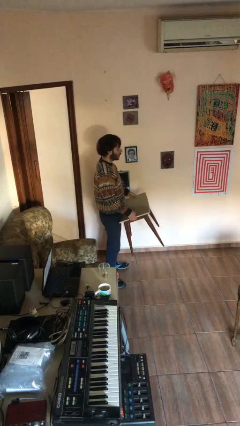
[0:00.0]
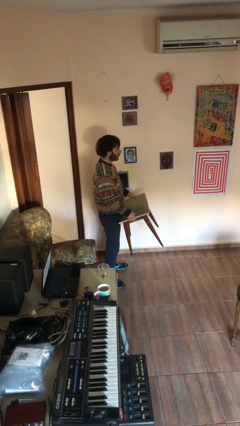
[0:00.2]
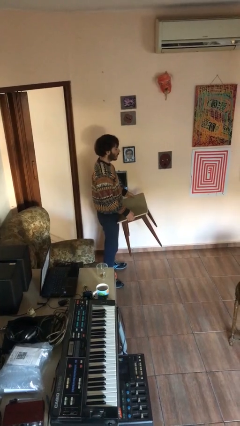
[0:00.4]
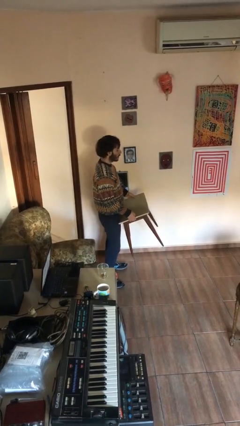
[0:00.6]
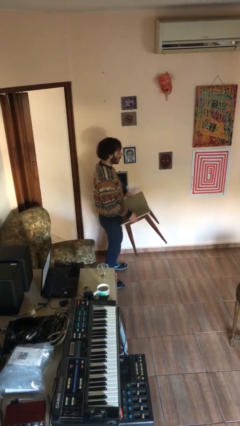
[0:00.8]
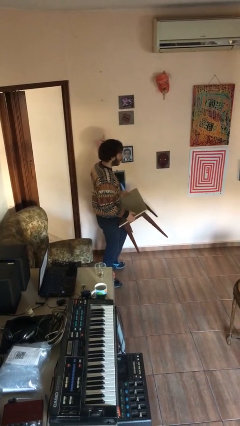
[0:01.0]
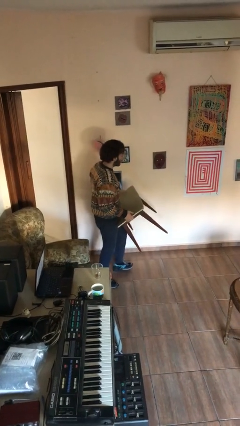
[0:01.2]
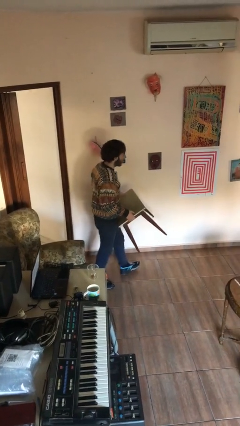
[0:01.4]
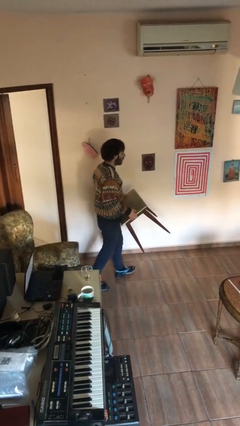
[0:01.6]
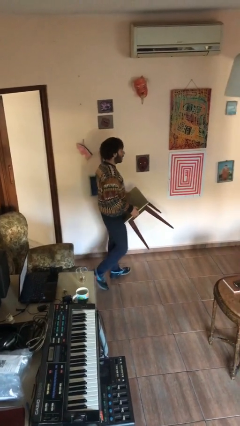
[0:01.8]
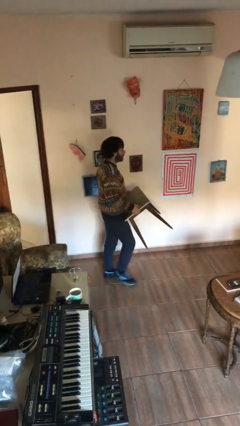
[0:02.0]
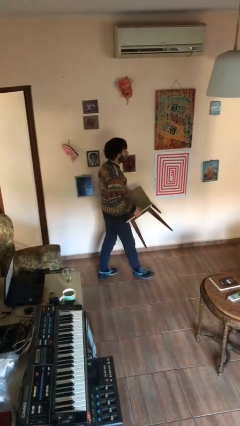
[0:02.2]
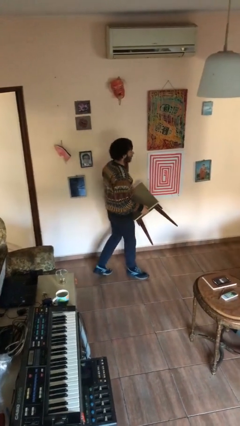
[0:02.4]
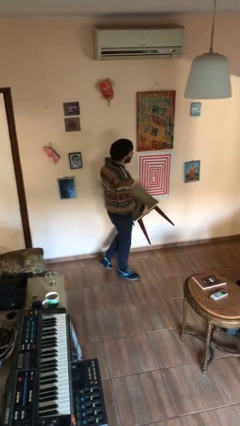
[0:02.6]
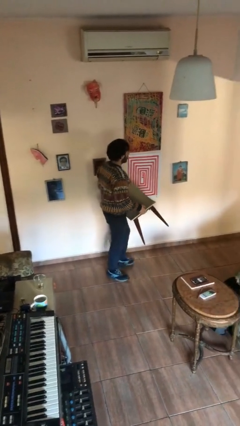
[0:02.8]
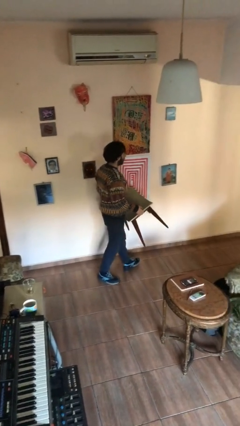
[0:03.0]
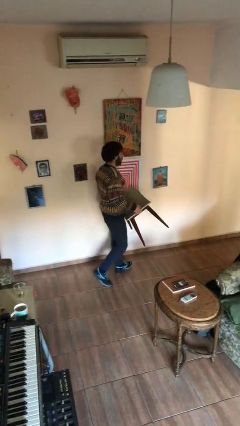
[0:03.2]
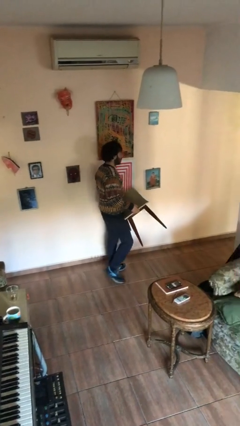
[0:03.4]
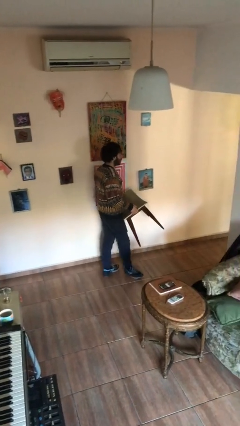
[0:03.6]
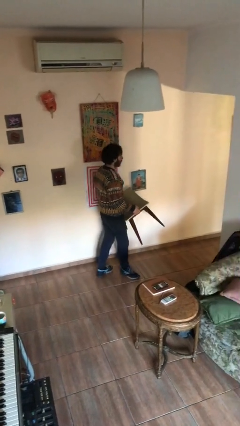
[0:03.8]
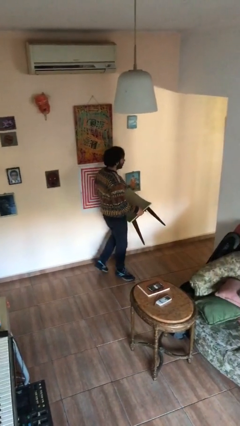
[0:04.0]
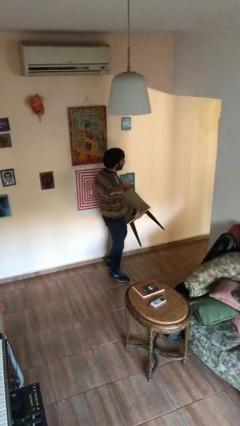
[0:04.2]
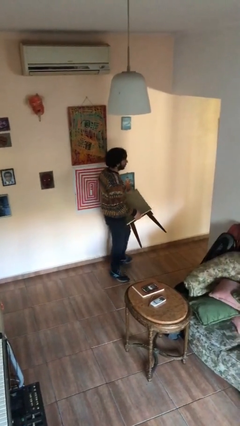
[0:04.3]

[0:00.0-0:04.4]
person carries furniture

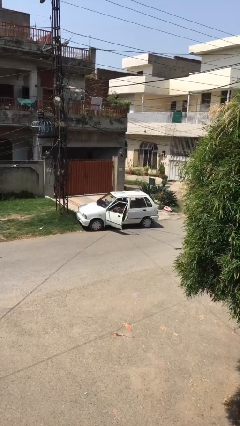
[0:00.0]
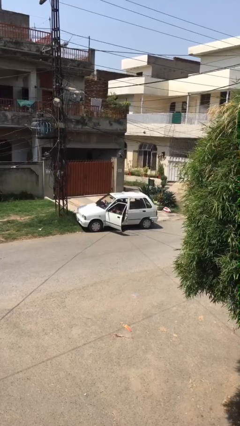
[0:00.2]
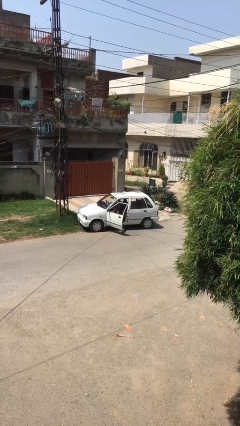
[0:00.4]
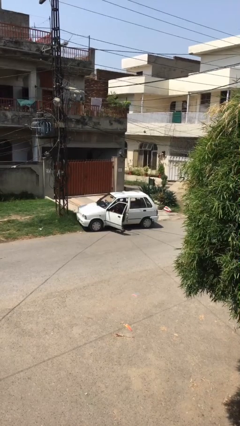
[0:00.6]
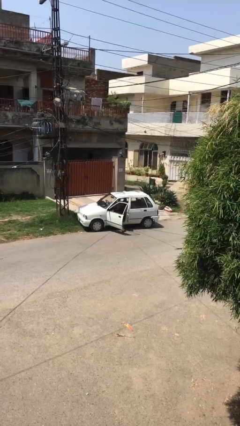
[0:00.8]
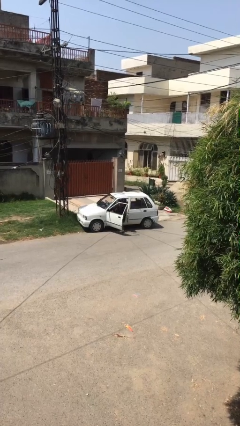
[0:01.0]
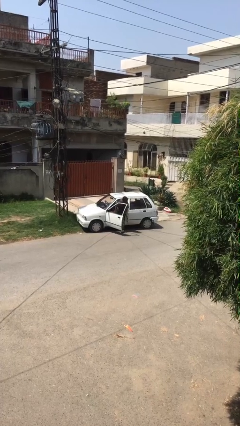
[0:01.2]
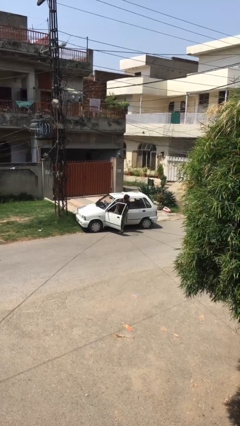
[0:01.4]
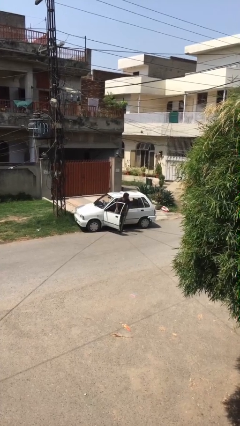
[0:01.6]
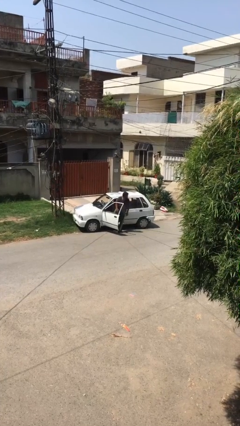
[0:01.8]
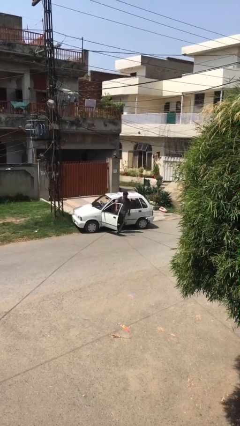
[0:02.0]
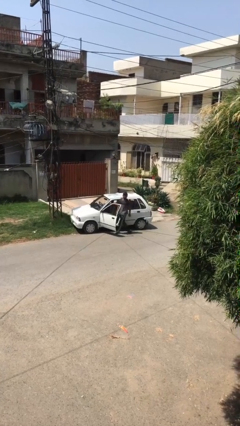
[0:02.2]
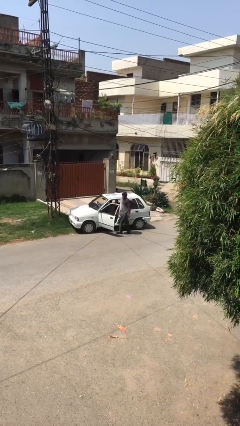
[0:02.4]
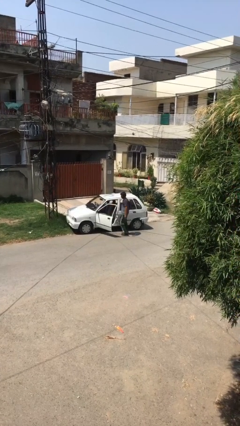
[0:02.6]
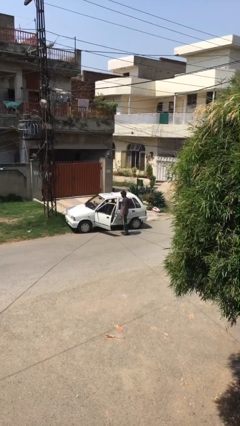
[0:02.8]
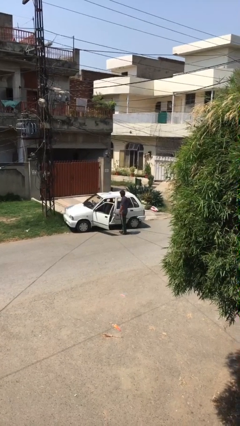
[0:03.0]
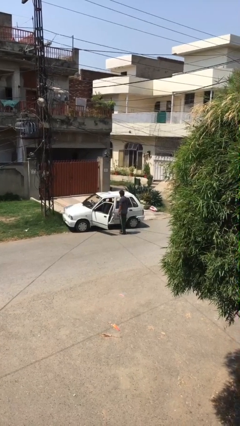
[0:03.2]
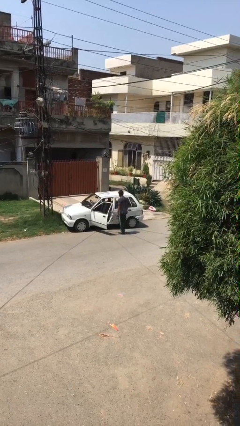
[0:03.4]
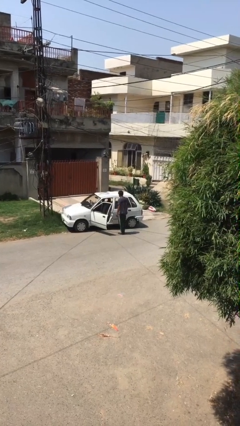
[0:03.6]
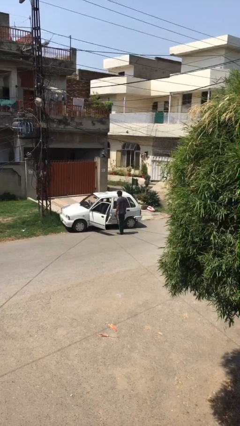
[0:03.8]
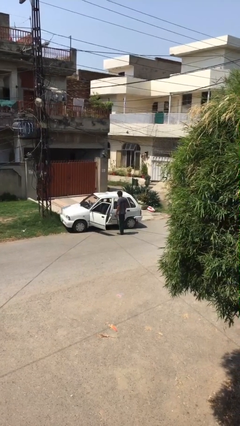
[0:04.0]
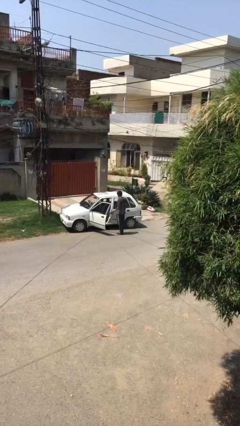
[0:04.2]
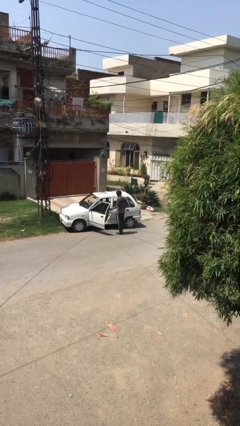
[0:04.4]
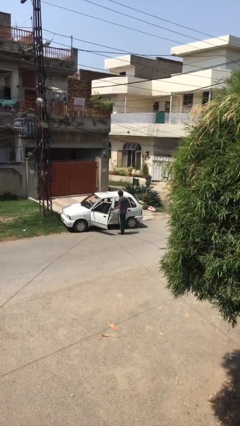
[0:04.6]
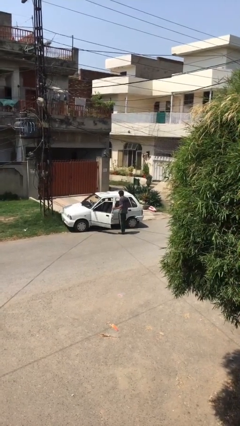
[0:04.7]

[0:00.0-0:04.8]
person exits car

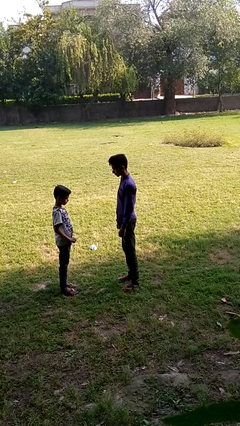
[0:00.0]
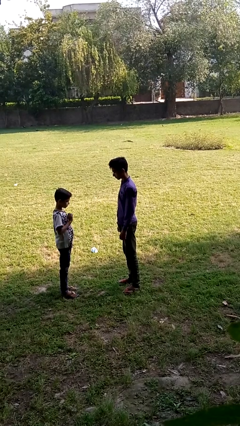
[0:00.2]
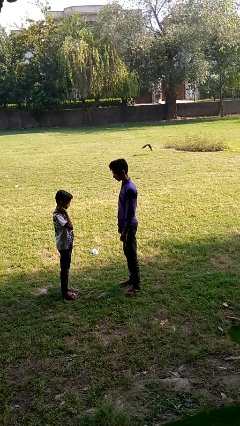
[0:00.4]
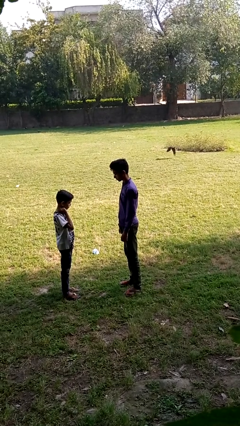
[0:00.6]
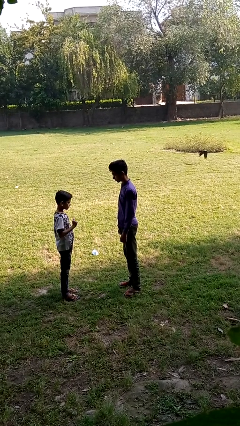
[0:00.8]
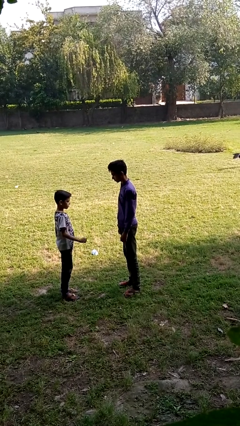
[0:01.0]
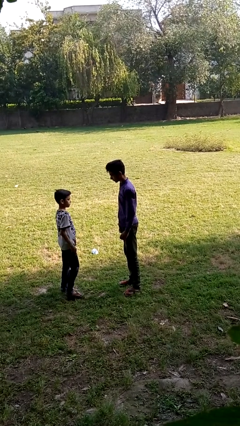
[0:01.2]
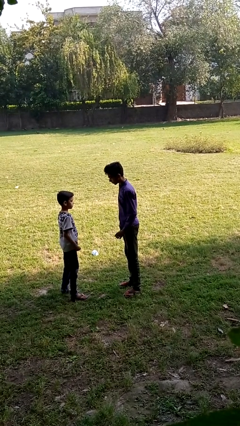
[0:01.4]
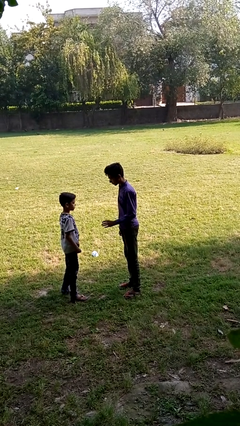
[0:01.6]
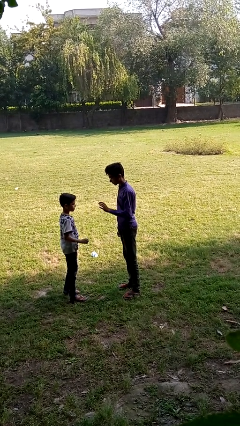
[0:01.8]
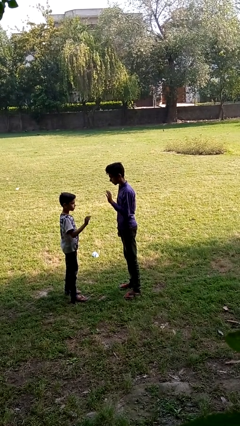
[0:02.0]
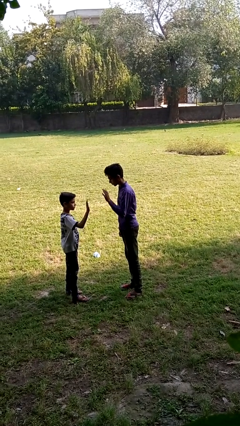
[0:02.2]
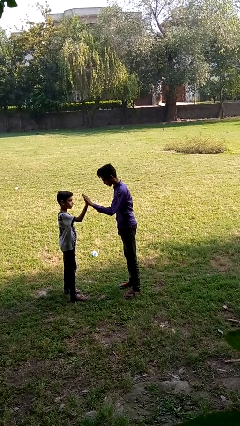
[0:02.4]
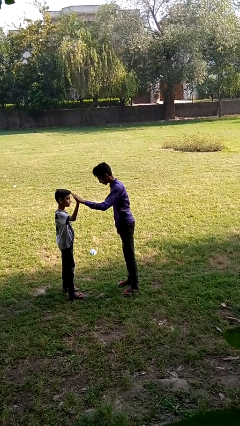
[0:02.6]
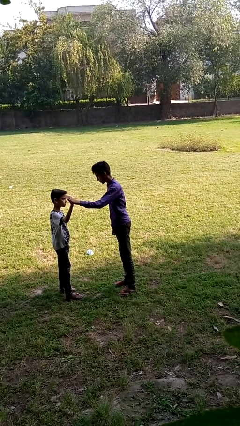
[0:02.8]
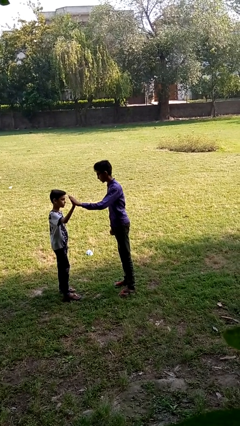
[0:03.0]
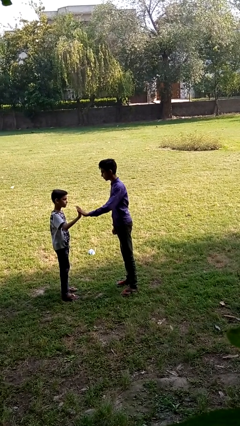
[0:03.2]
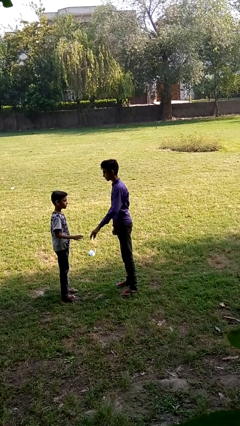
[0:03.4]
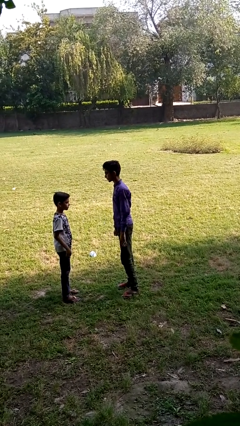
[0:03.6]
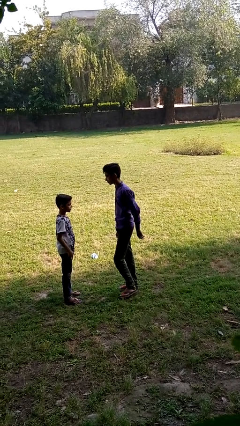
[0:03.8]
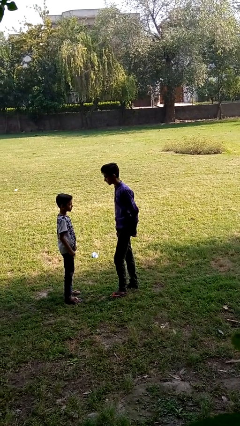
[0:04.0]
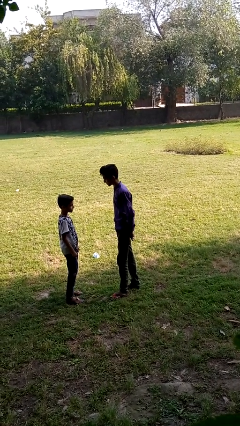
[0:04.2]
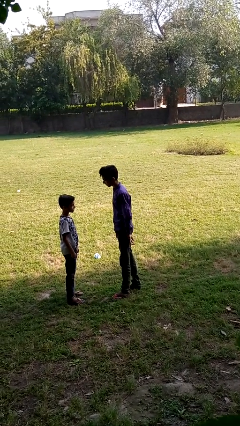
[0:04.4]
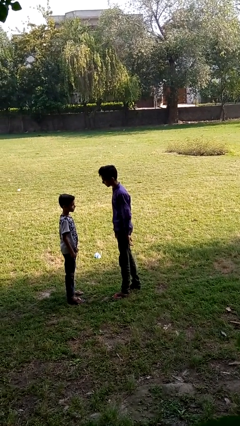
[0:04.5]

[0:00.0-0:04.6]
person highfives hand

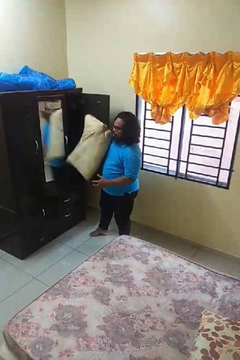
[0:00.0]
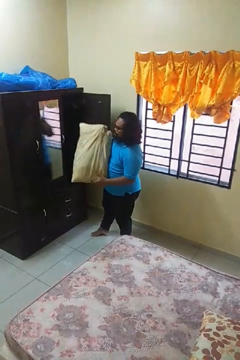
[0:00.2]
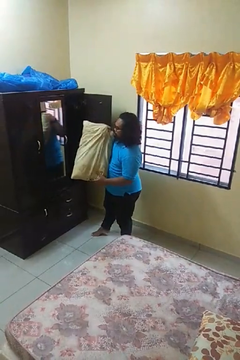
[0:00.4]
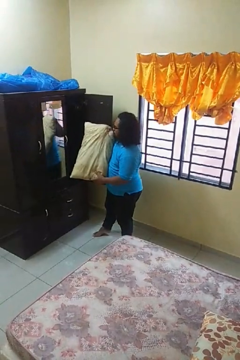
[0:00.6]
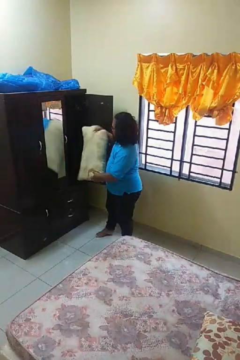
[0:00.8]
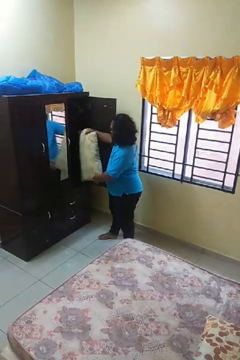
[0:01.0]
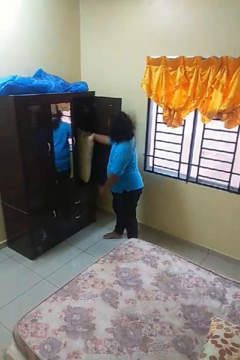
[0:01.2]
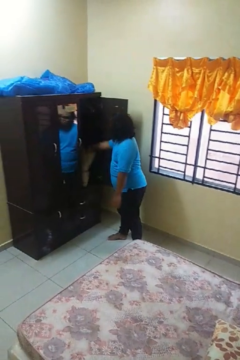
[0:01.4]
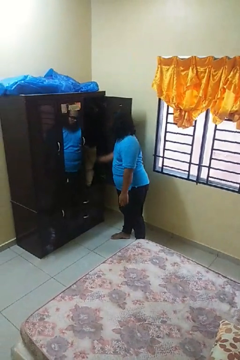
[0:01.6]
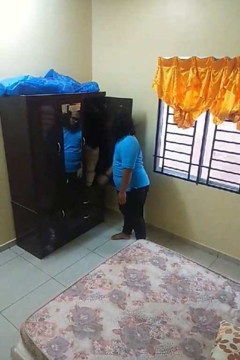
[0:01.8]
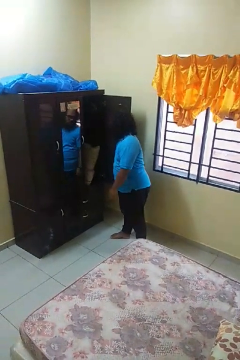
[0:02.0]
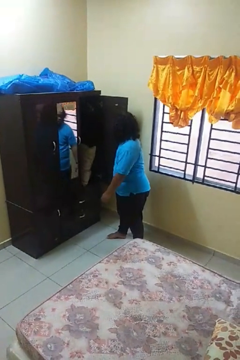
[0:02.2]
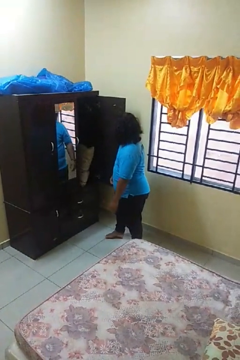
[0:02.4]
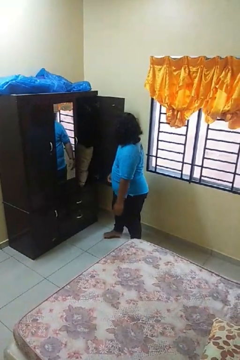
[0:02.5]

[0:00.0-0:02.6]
person puts down object into cabinet

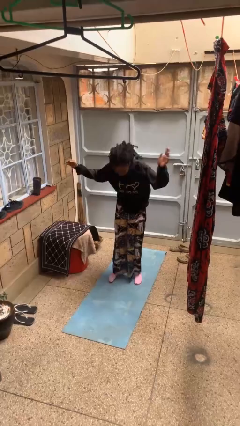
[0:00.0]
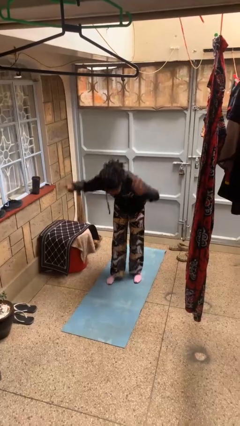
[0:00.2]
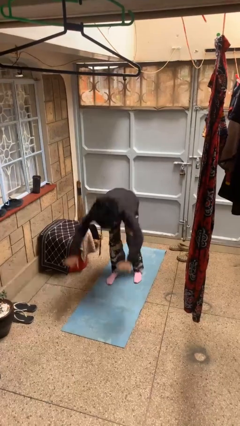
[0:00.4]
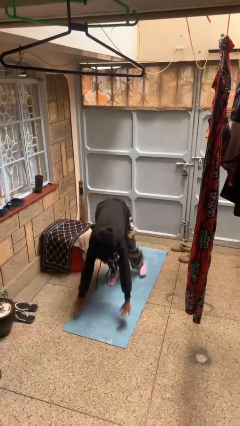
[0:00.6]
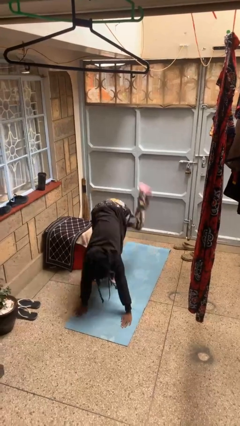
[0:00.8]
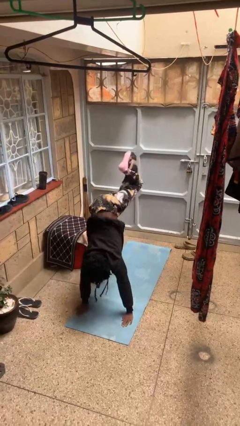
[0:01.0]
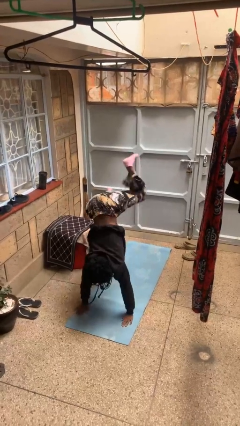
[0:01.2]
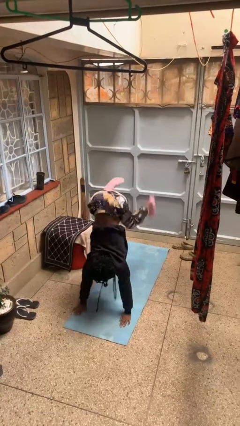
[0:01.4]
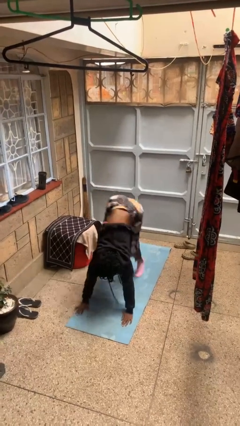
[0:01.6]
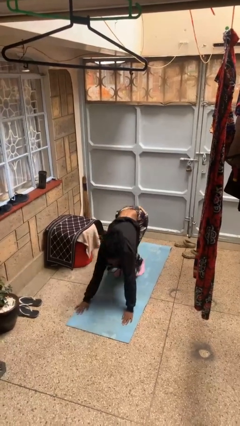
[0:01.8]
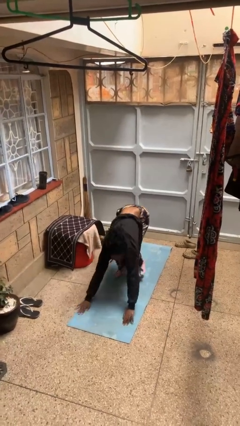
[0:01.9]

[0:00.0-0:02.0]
person handstand
